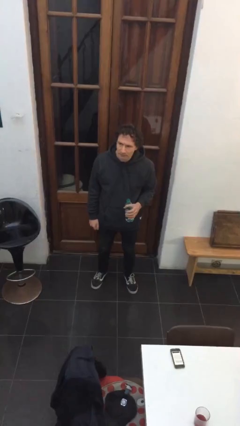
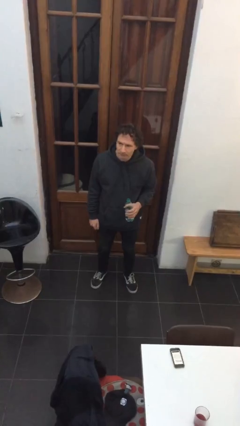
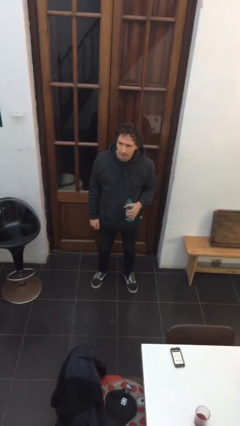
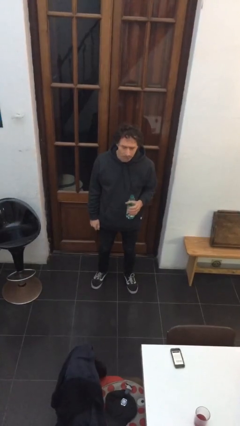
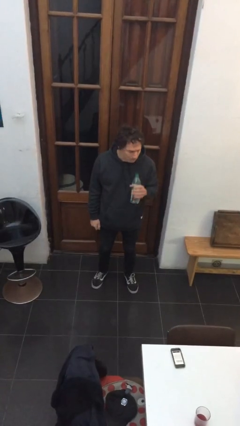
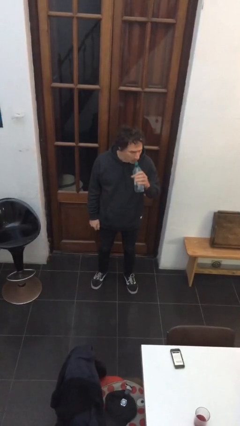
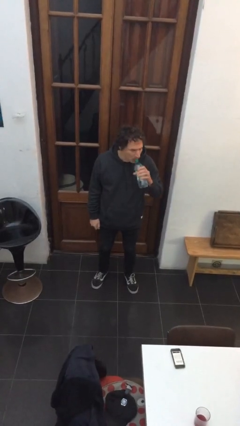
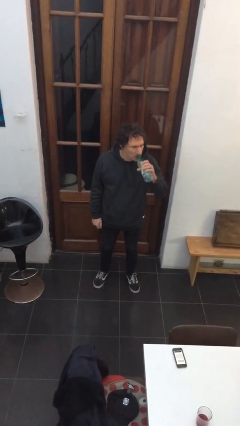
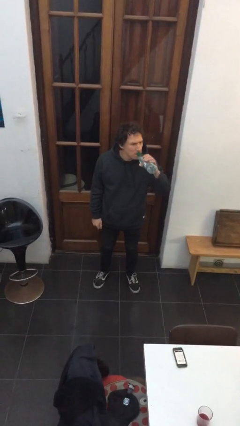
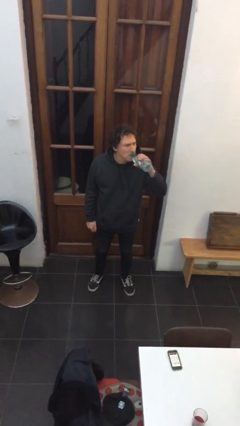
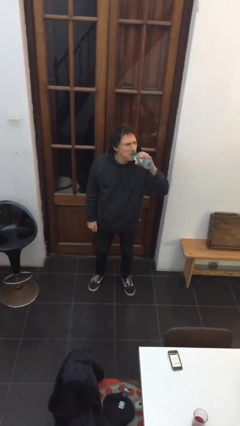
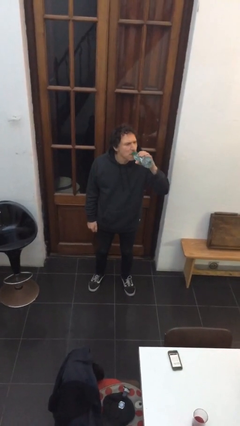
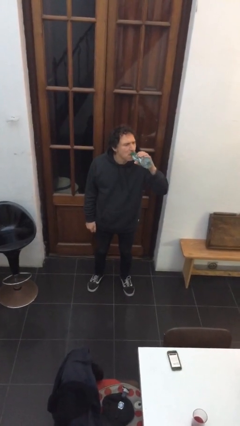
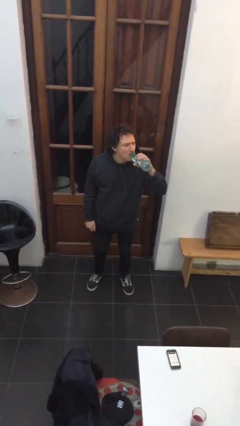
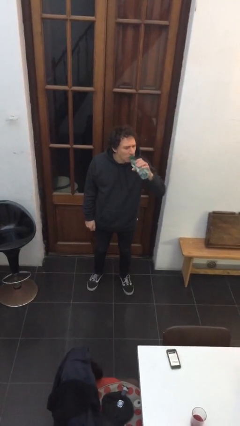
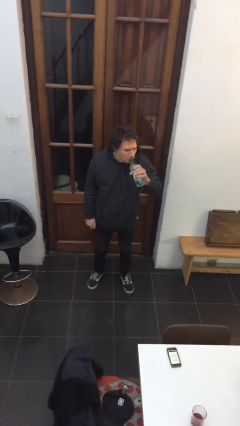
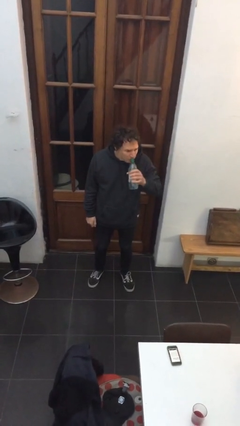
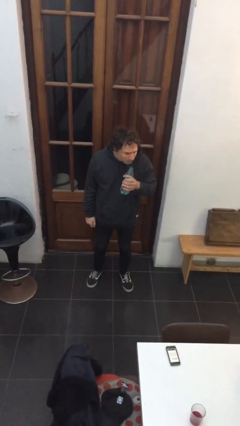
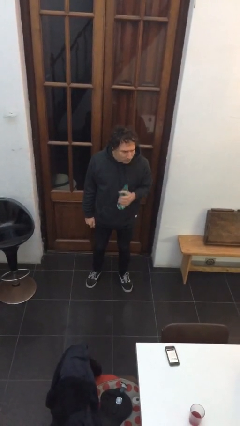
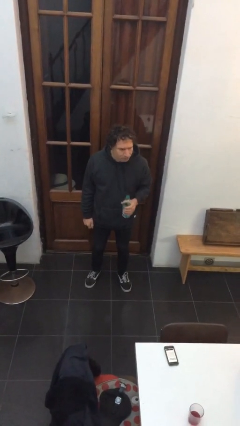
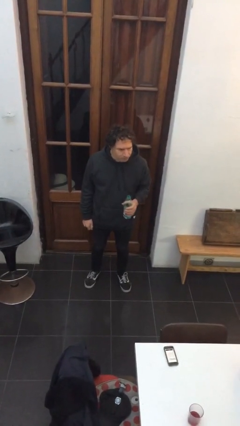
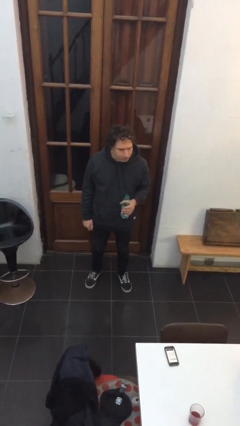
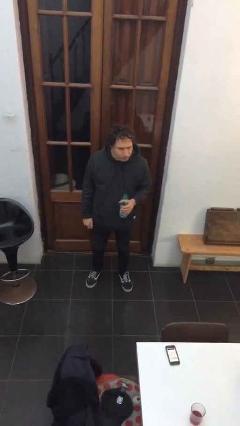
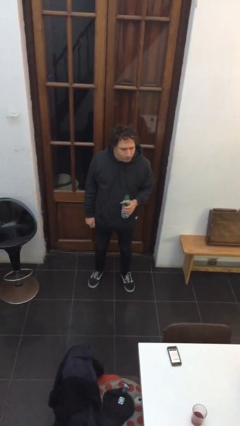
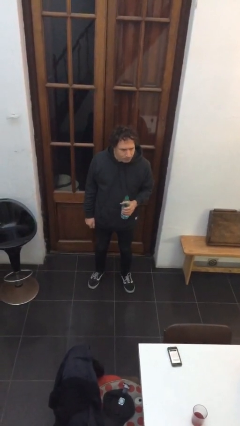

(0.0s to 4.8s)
person drinks from bottle

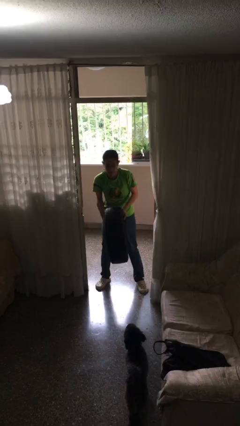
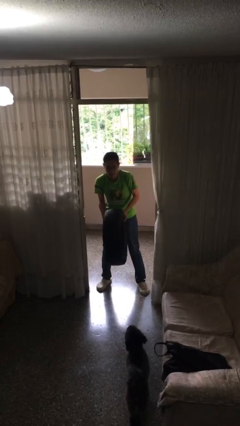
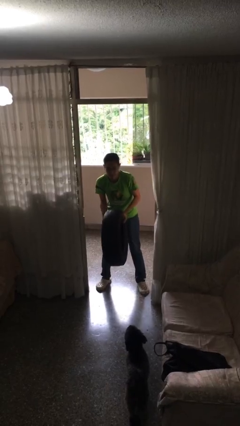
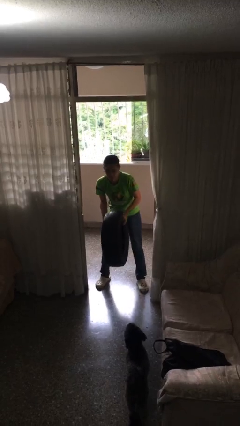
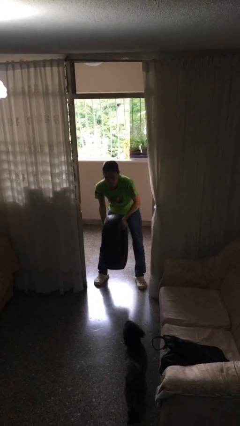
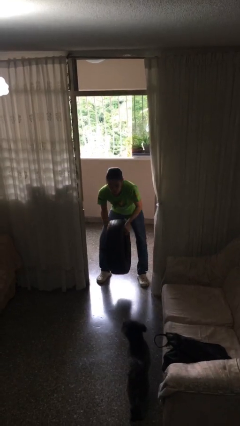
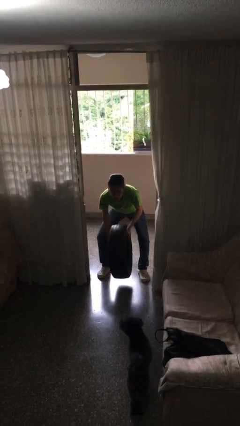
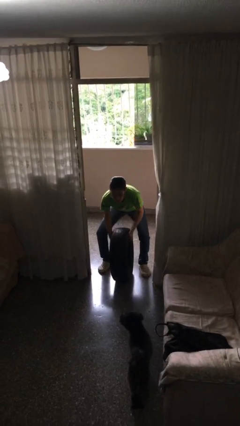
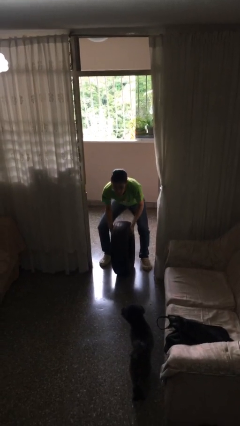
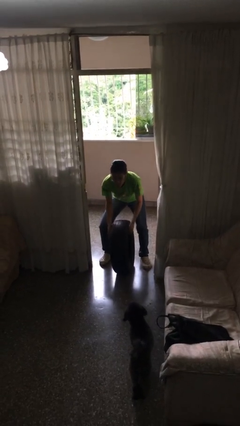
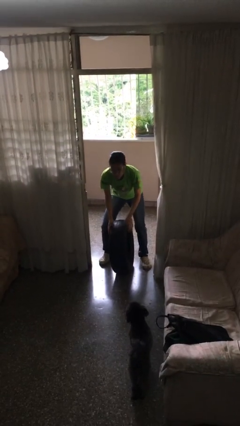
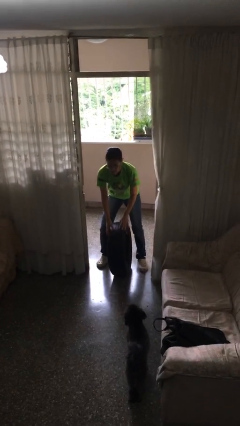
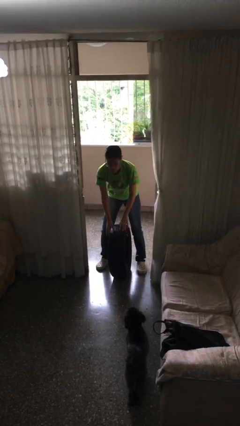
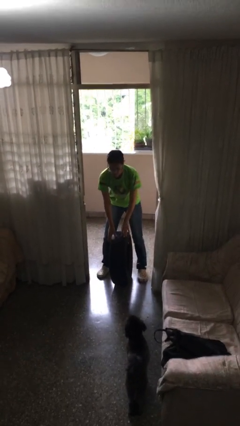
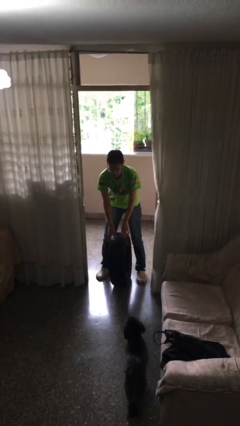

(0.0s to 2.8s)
person puts down object on floor

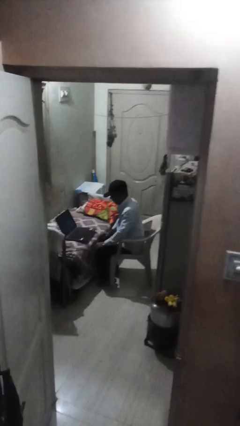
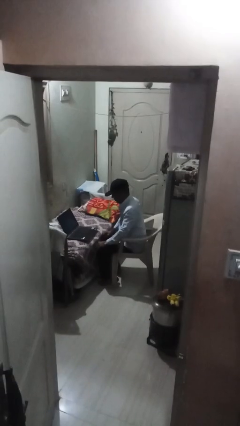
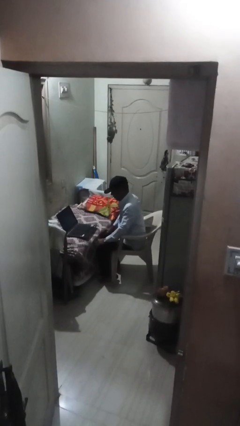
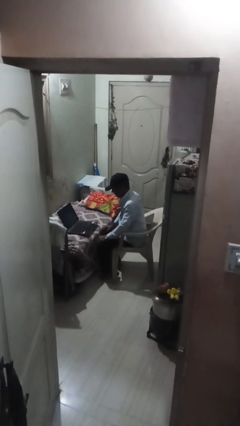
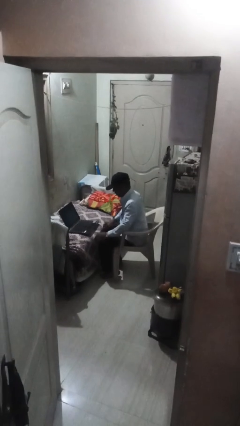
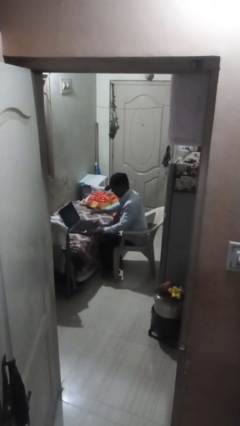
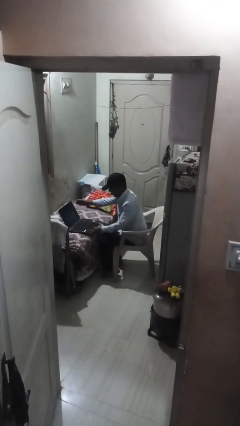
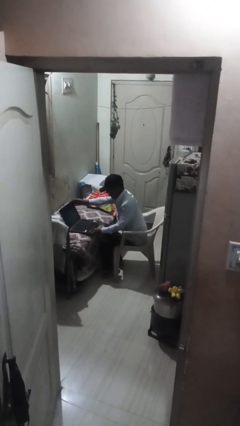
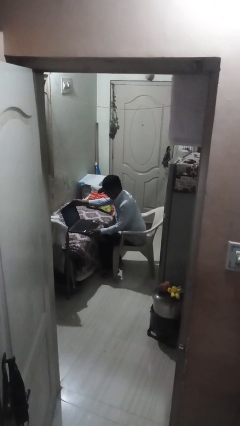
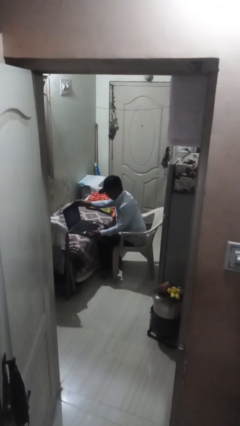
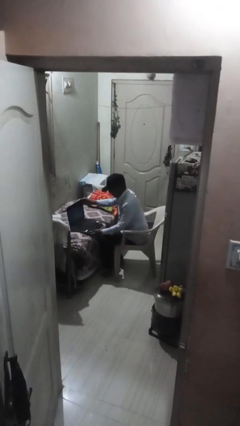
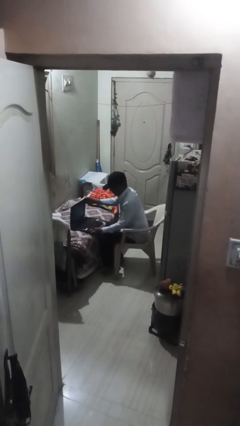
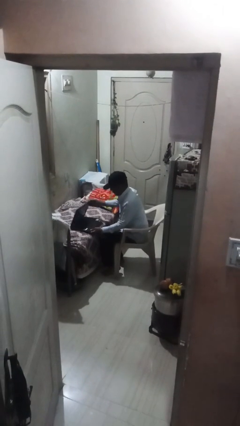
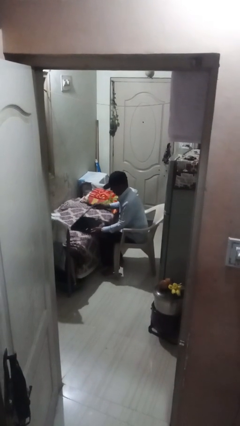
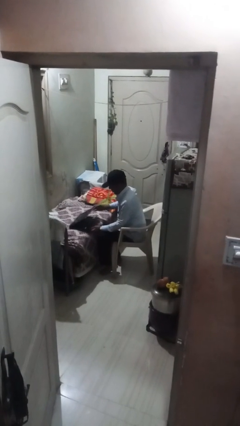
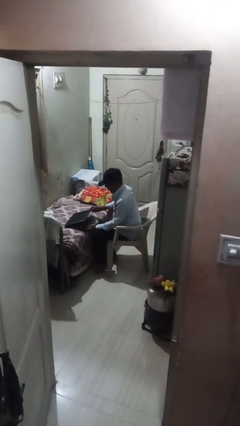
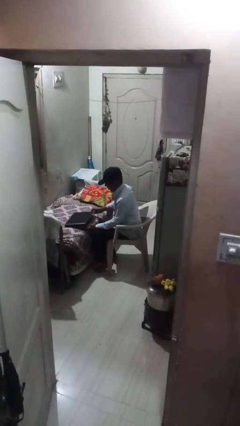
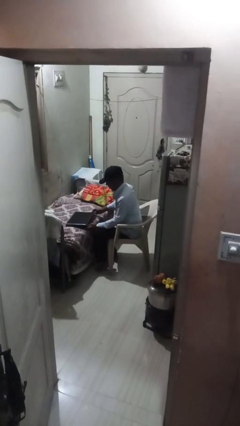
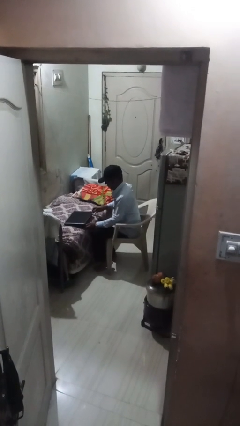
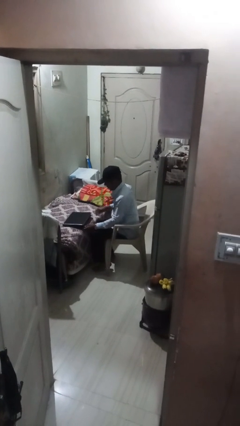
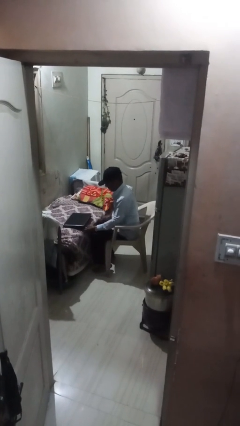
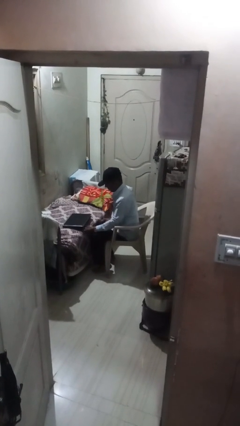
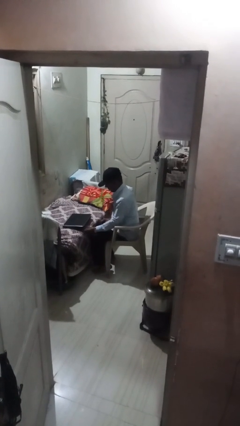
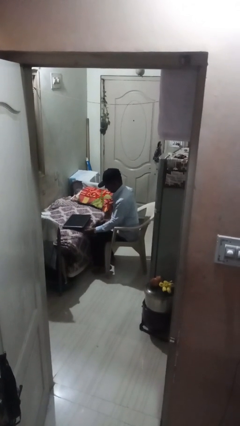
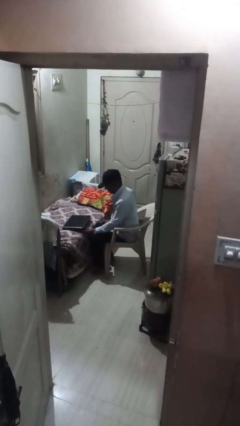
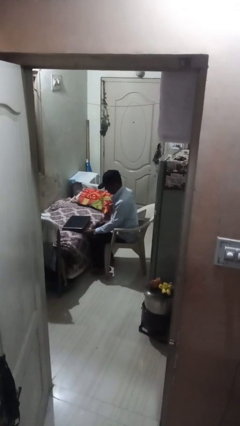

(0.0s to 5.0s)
person closes laptop

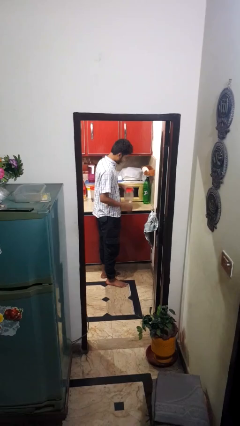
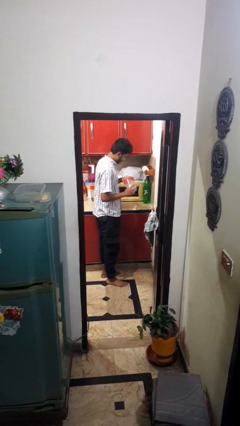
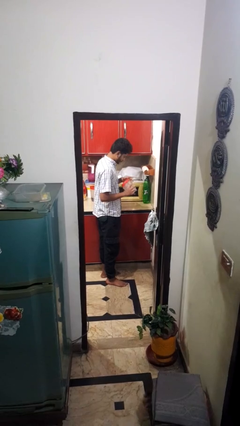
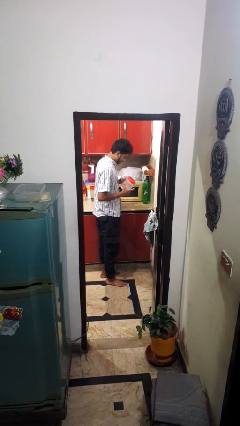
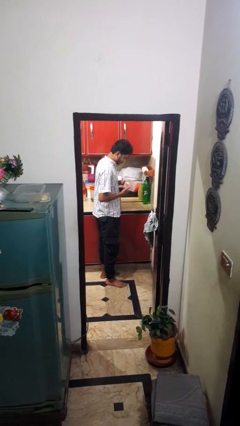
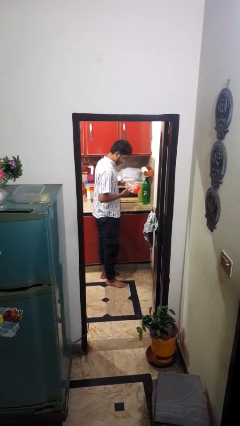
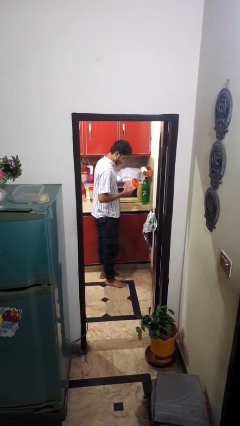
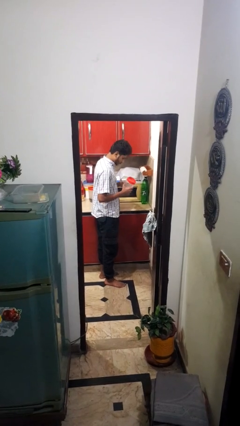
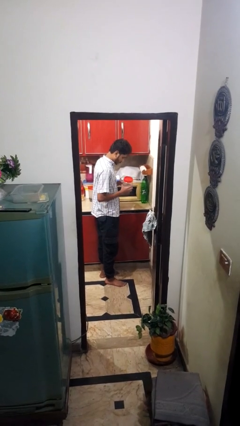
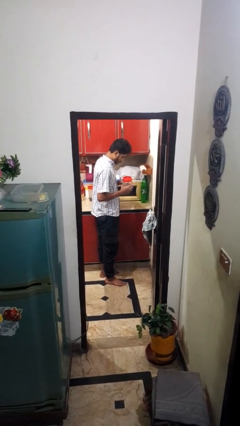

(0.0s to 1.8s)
person picks up object from countertop

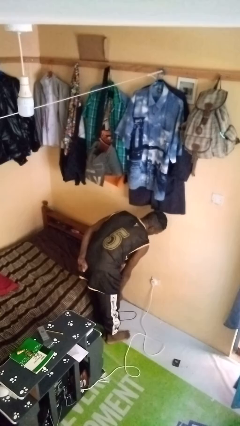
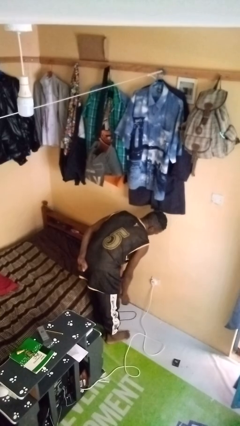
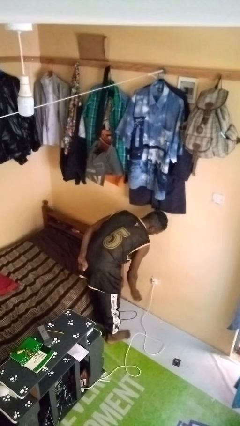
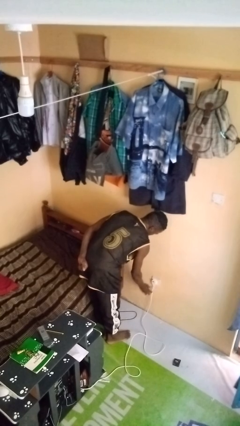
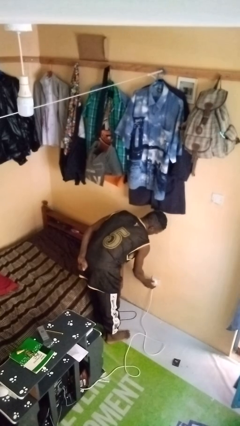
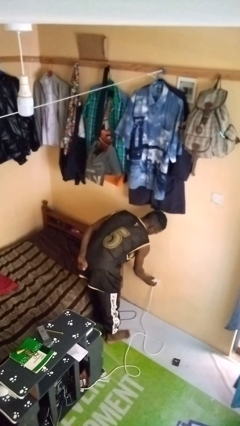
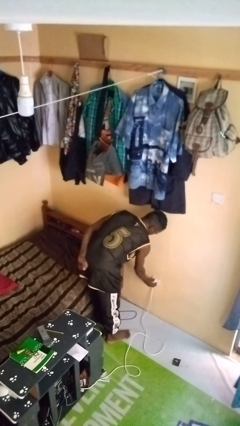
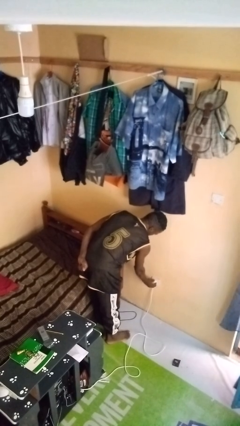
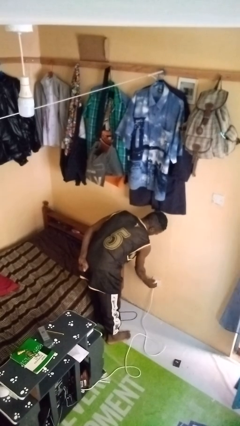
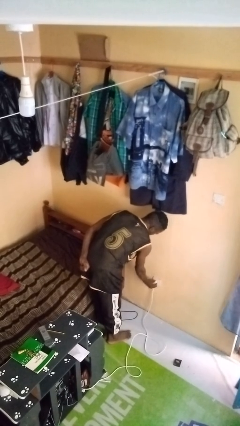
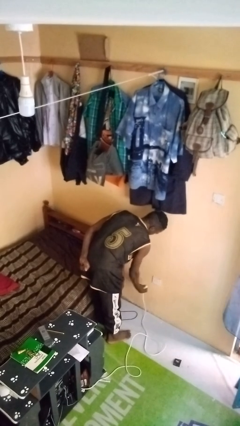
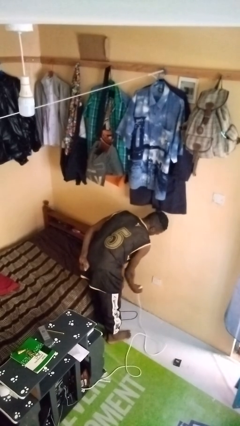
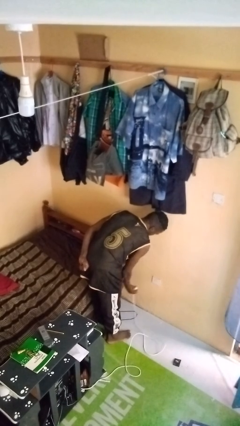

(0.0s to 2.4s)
person unplugs from electrical socket

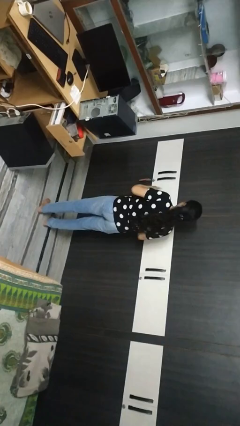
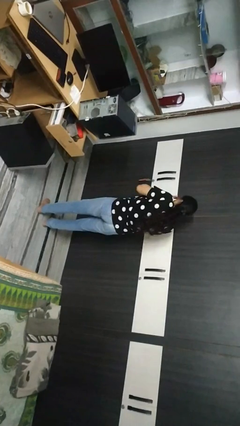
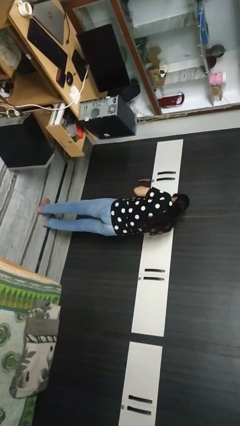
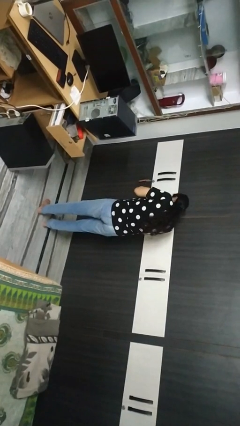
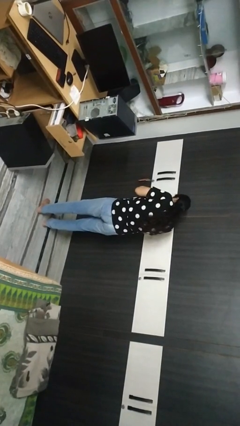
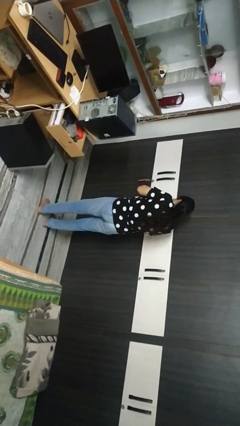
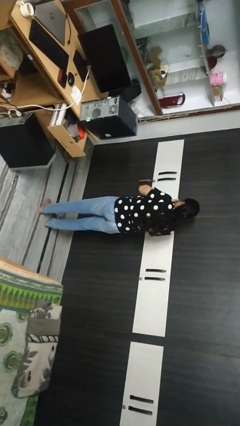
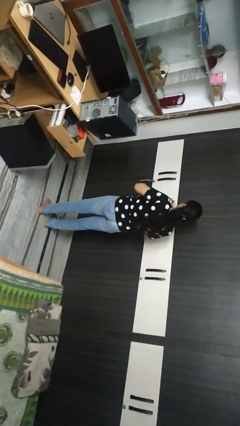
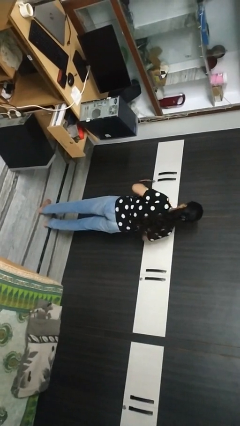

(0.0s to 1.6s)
person sneezes into hand
